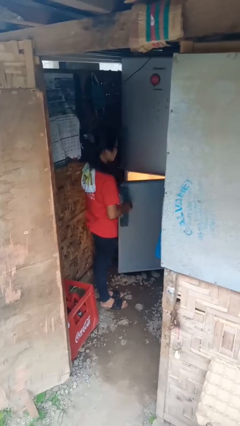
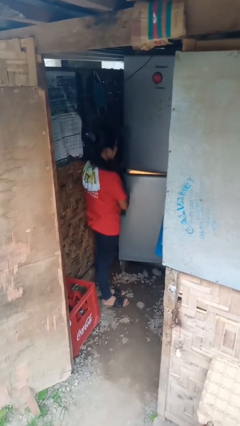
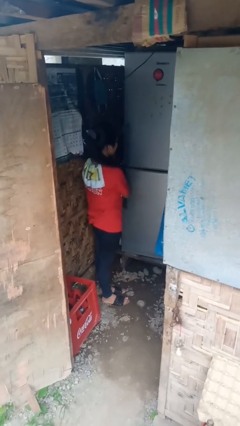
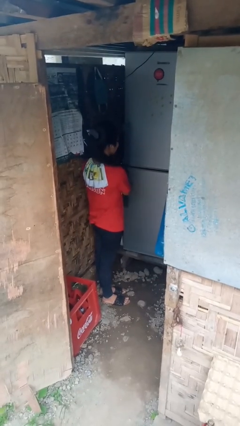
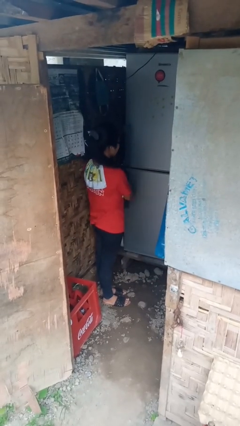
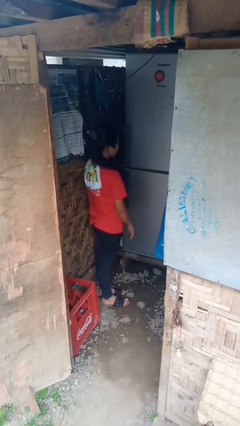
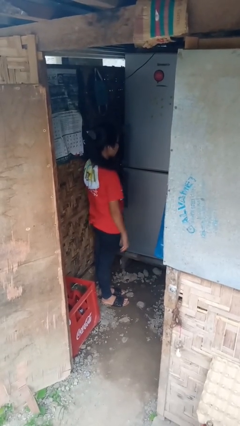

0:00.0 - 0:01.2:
person closes refrigerator

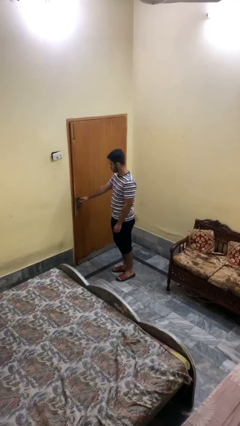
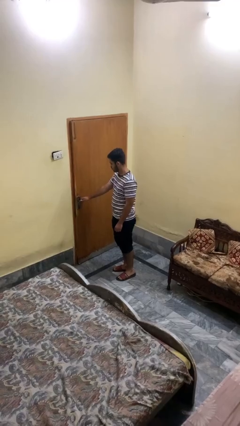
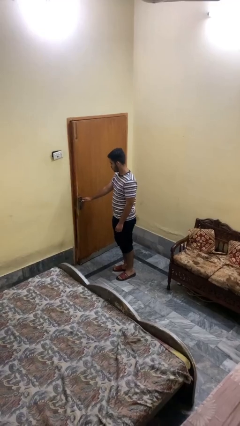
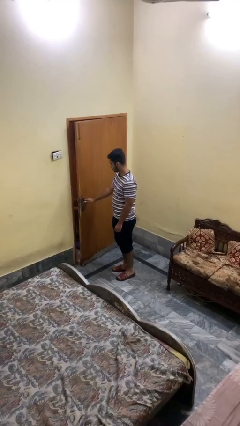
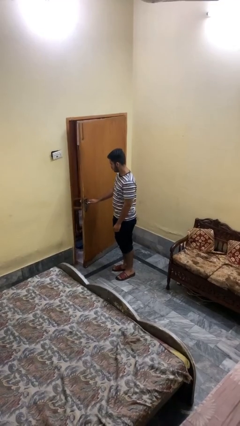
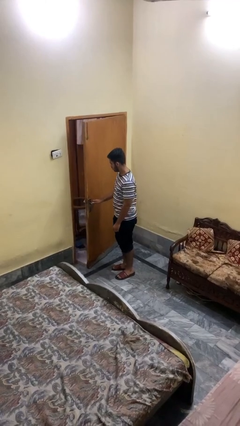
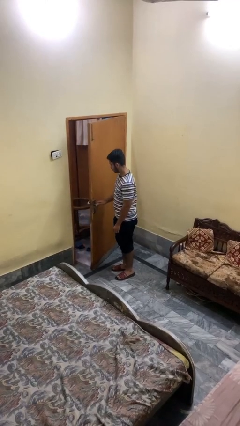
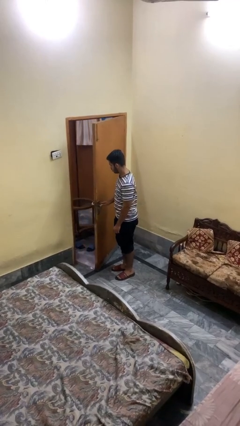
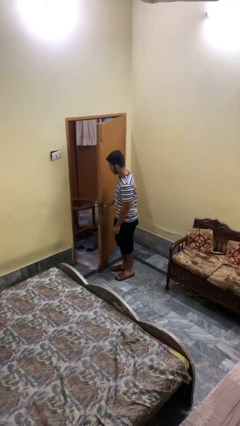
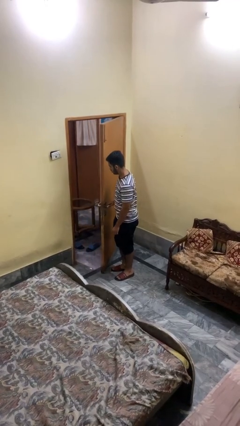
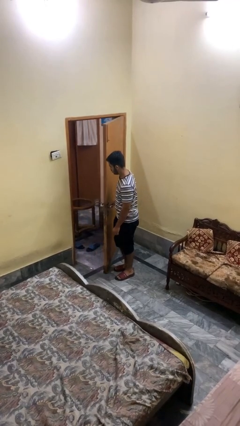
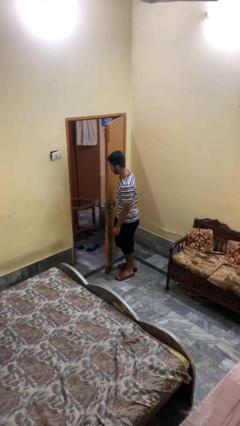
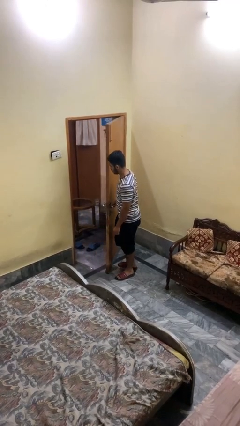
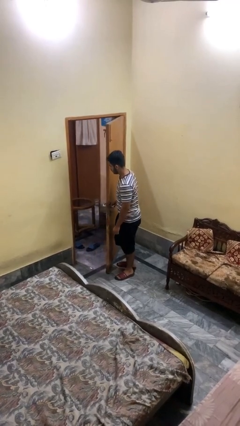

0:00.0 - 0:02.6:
person opens facility door

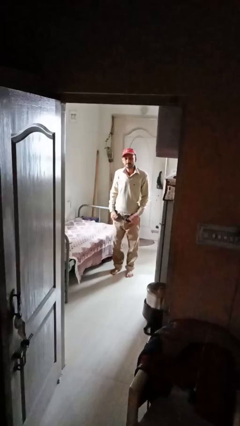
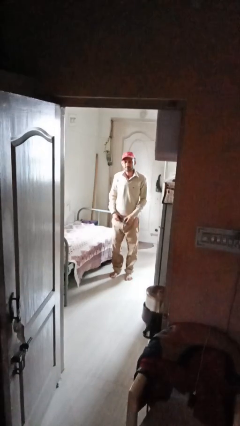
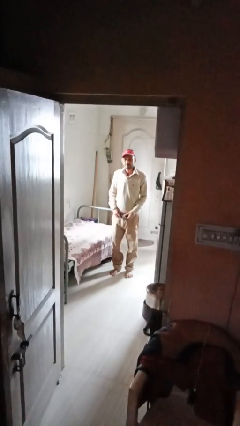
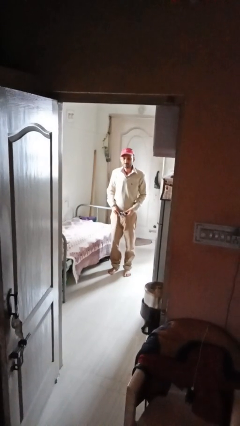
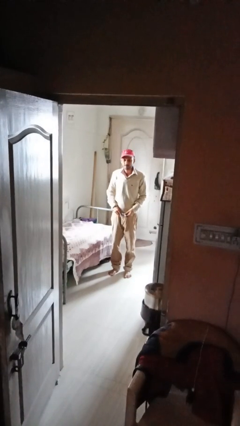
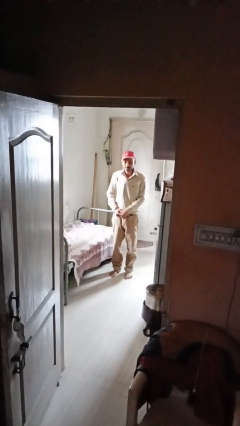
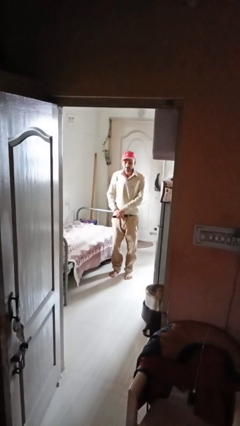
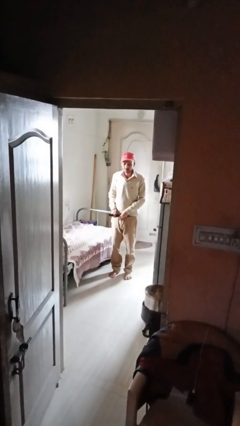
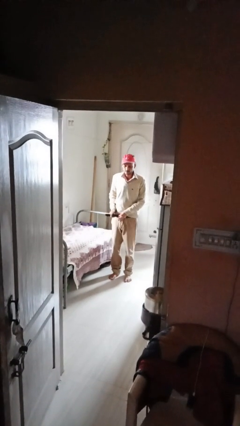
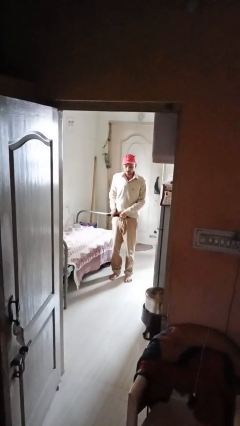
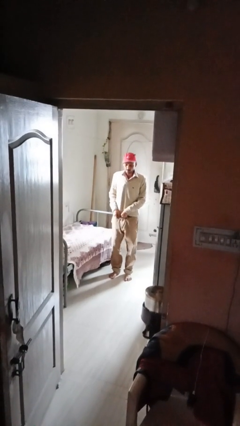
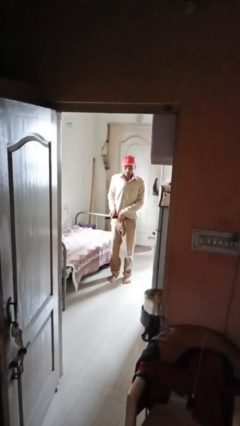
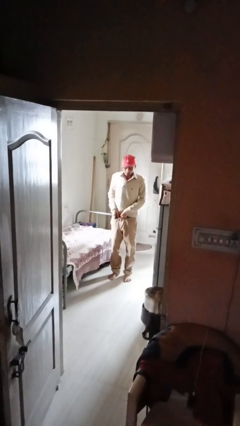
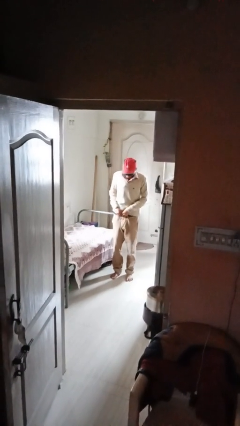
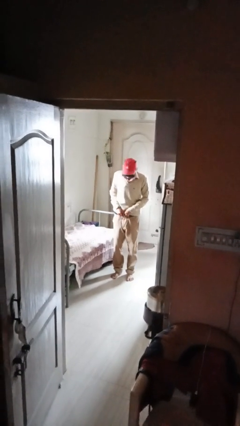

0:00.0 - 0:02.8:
person puts on belt

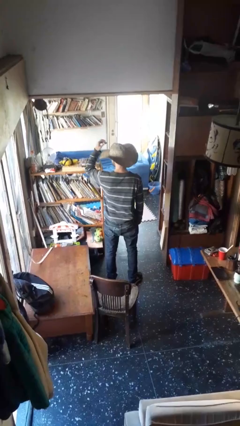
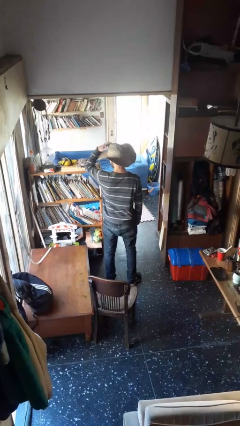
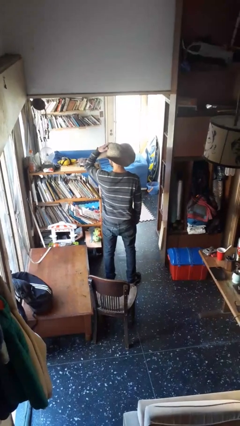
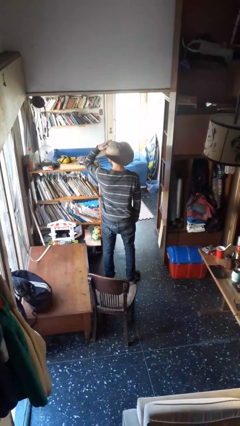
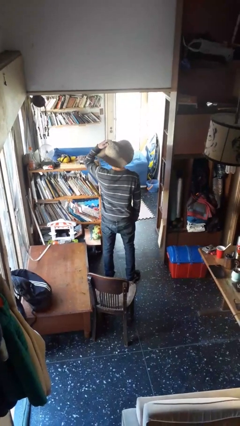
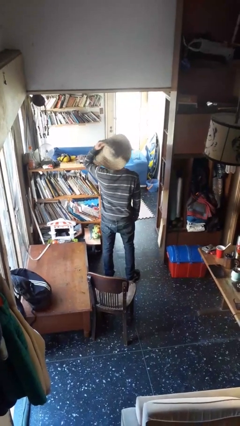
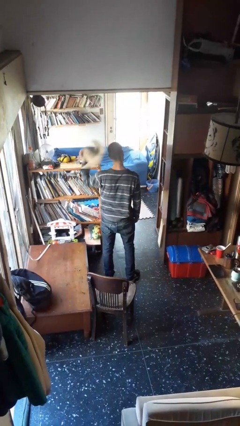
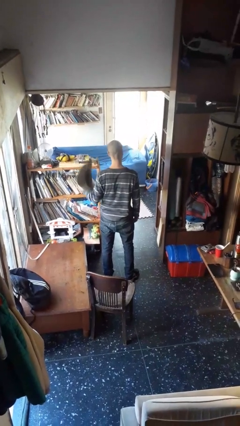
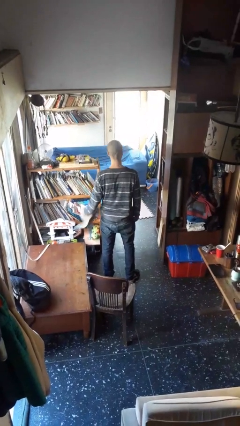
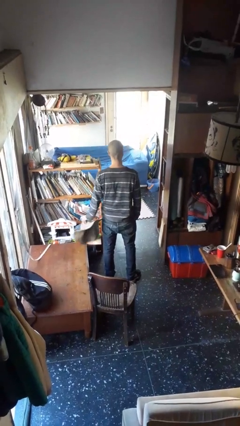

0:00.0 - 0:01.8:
person takes off hat

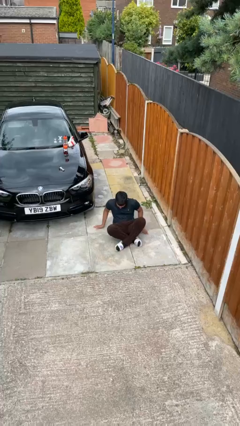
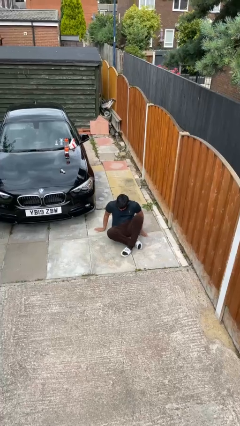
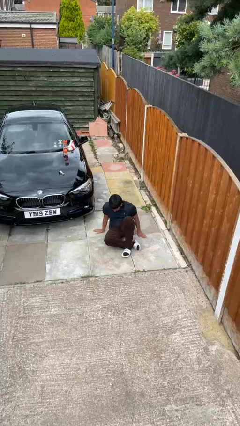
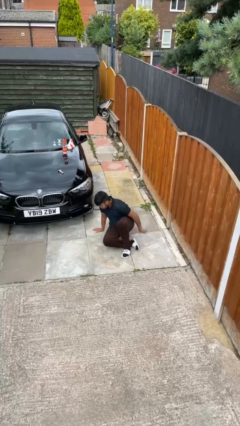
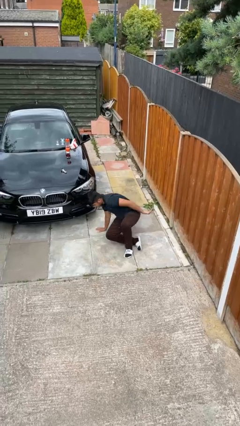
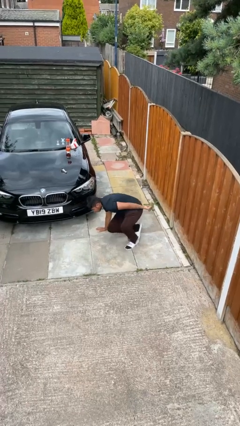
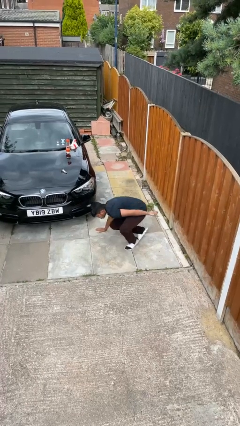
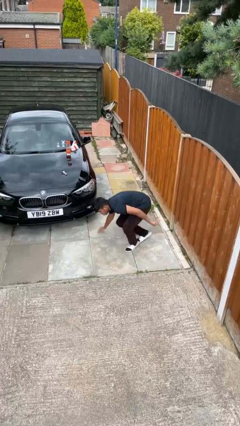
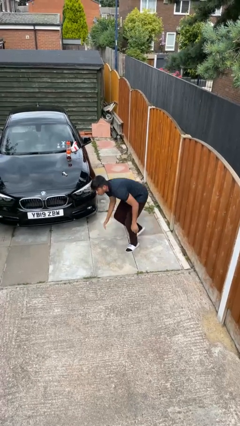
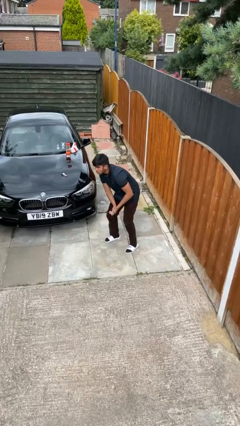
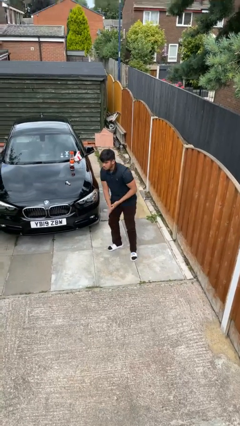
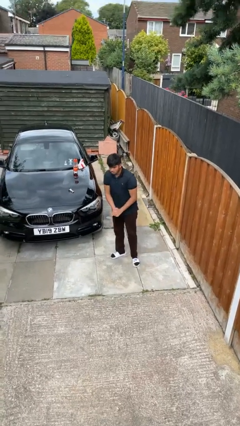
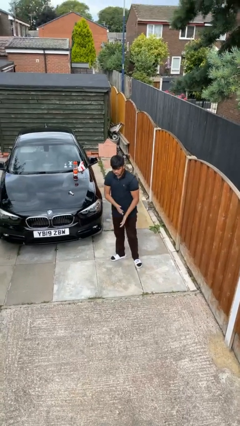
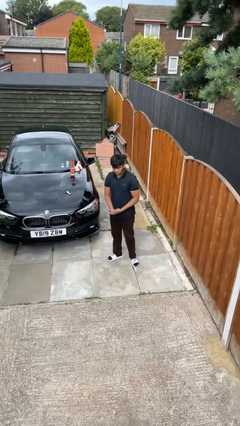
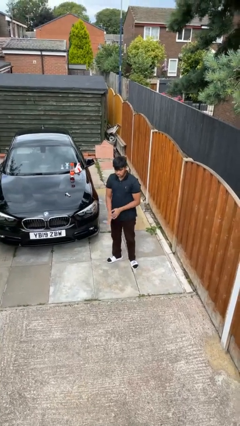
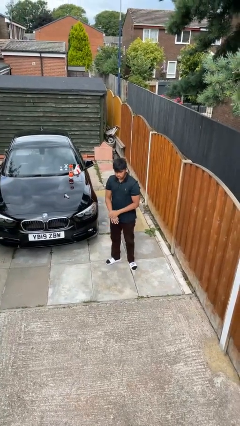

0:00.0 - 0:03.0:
person stands up from floor

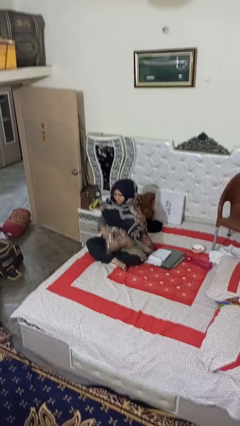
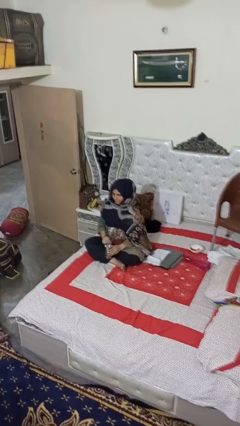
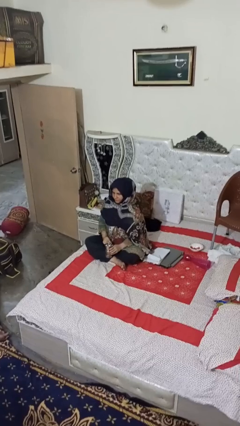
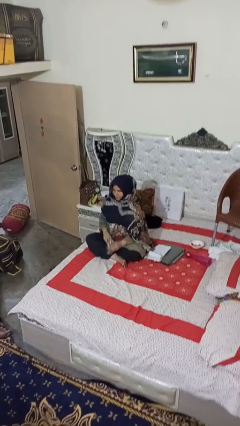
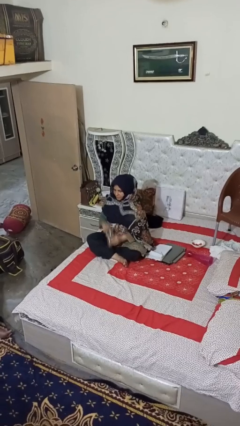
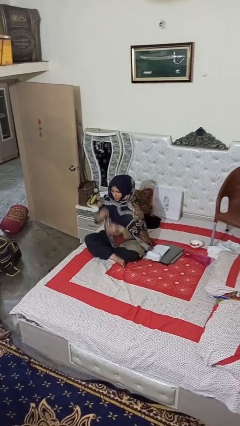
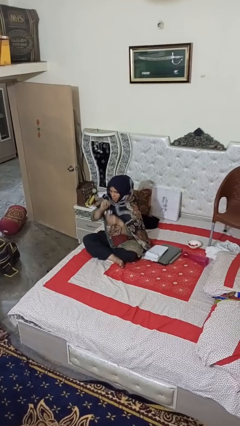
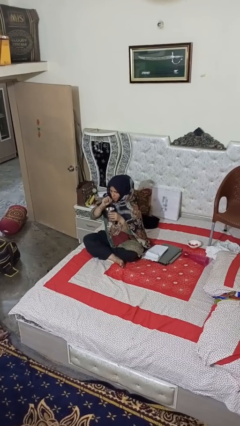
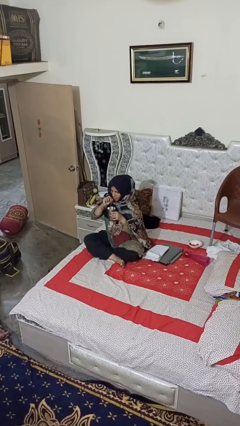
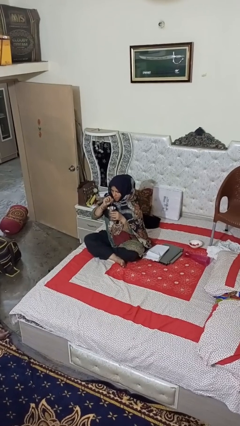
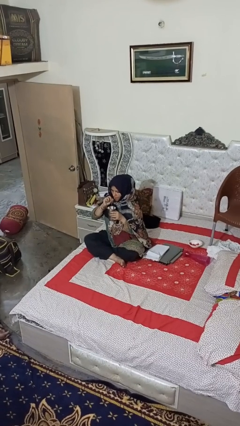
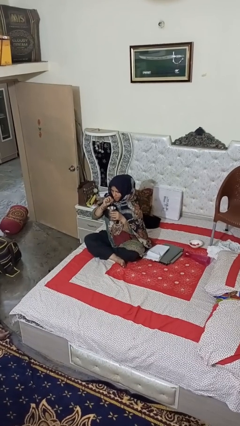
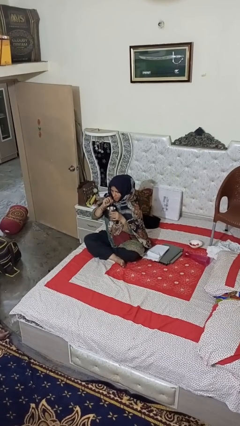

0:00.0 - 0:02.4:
person drinks from straw

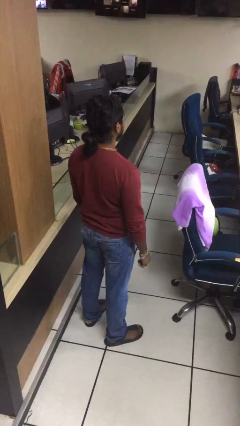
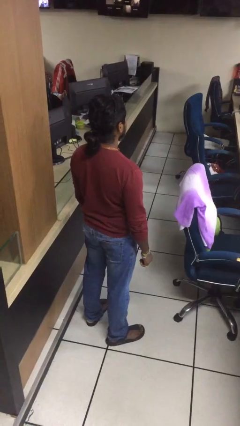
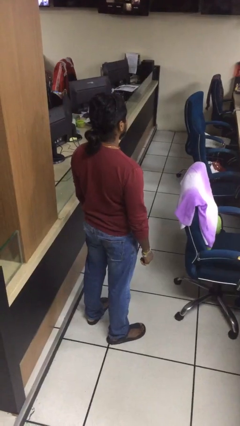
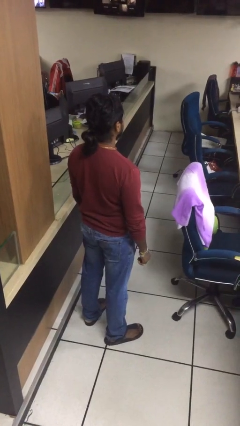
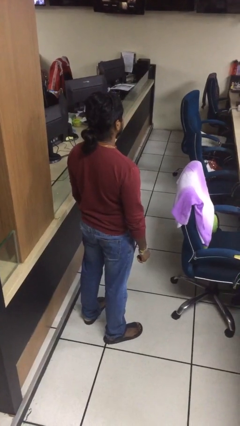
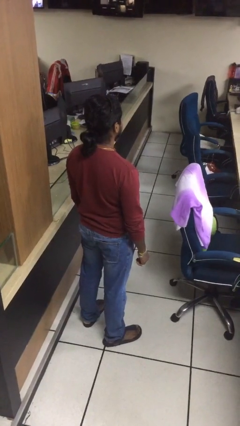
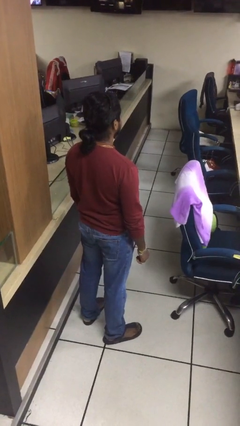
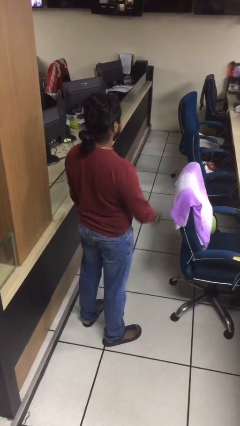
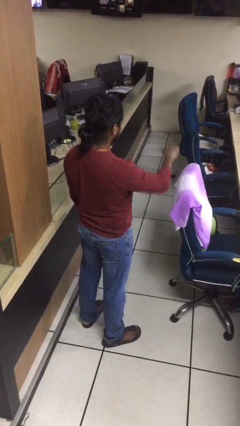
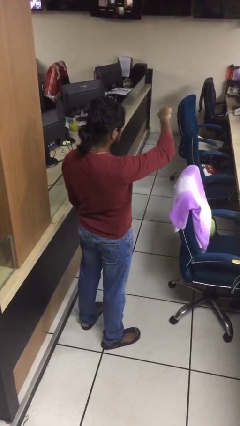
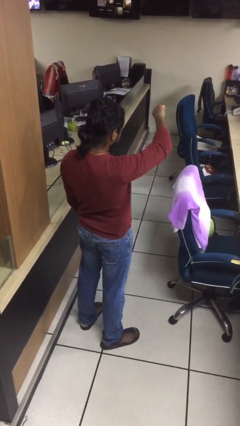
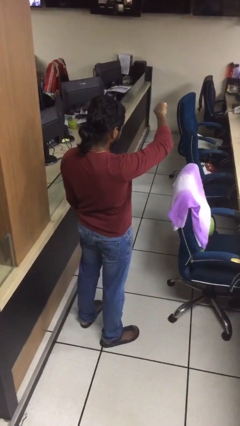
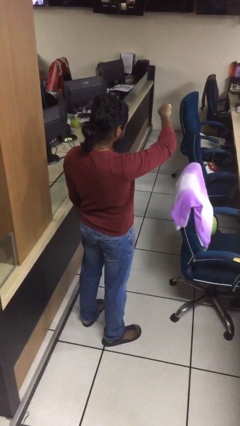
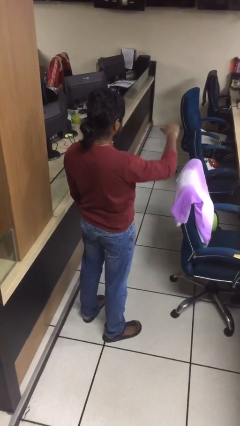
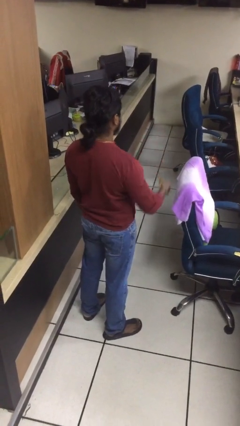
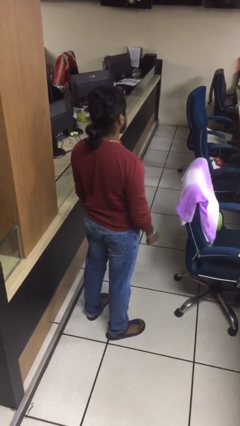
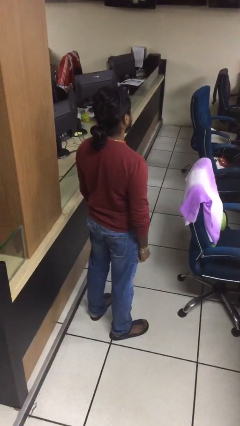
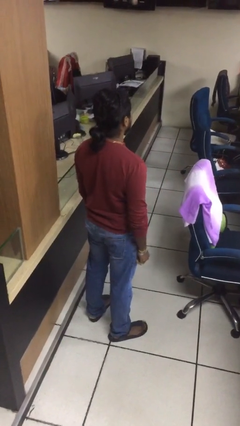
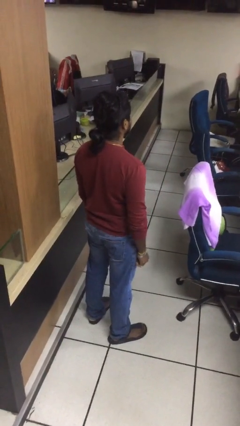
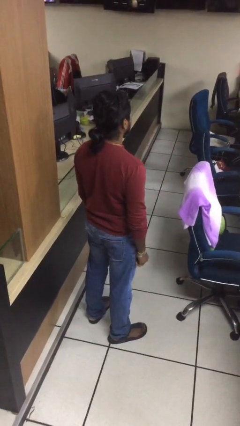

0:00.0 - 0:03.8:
person gestures thumbs down
